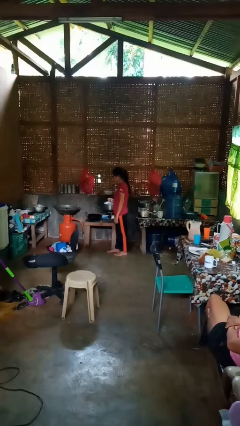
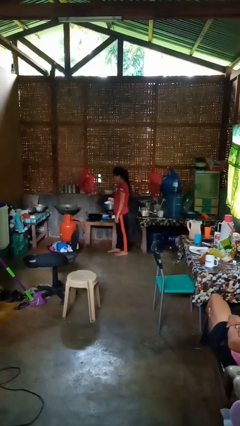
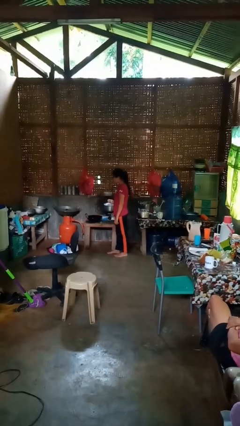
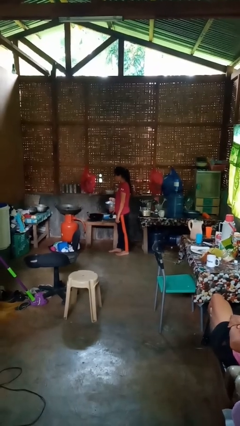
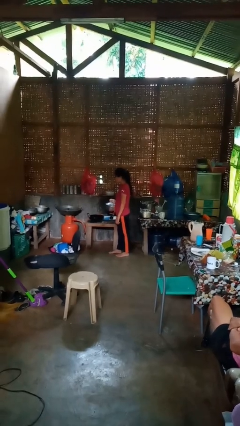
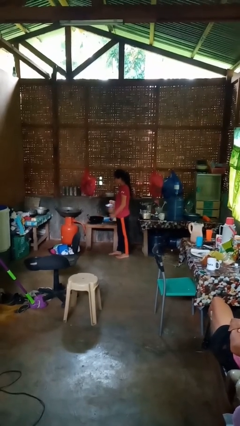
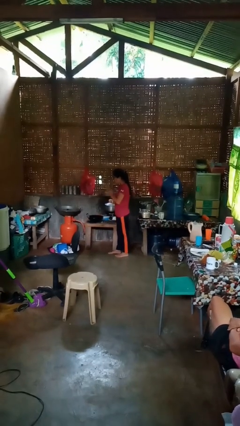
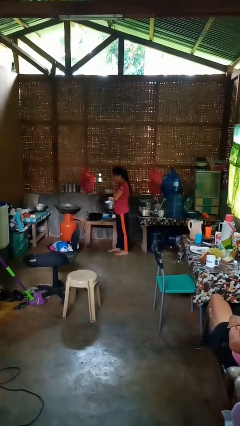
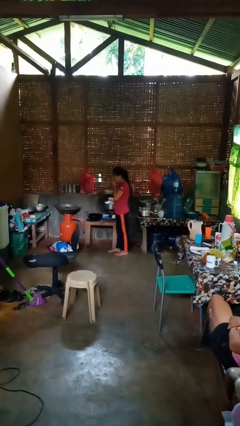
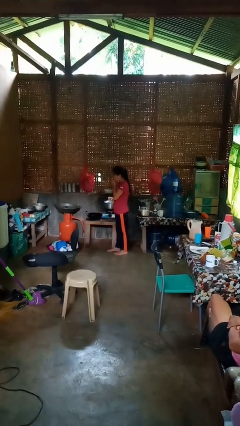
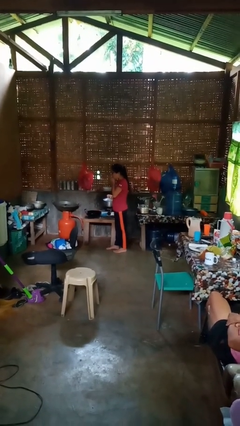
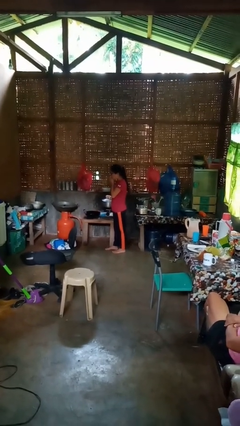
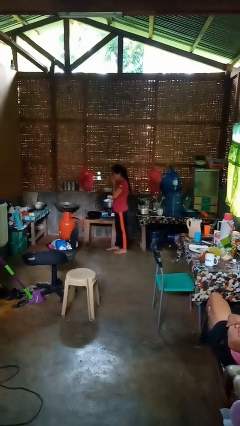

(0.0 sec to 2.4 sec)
person burns hand

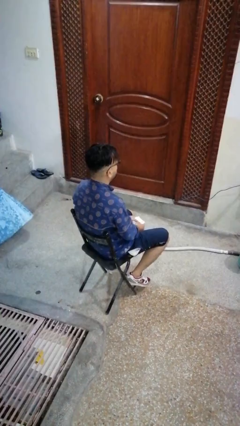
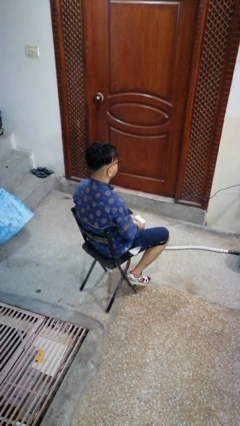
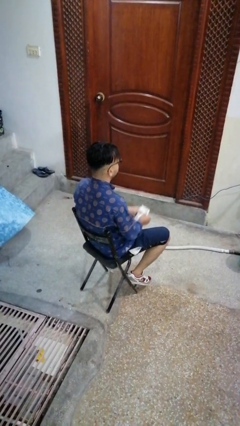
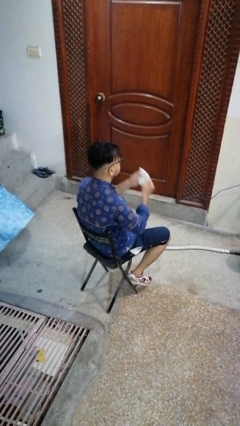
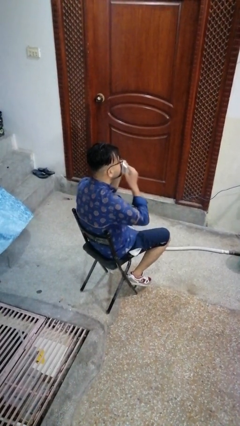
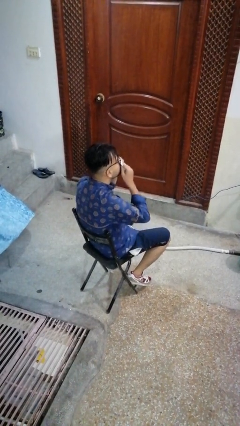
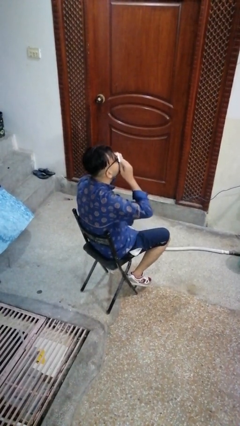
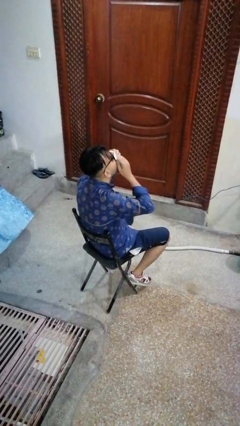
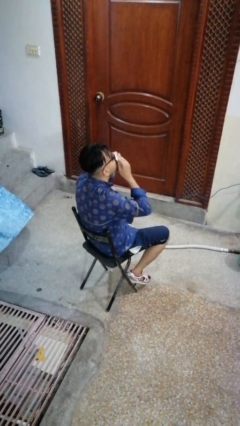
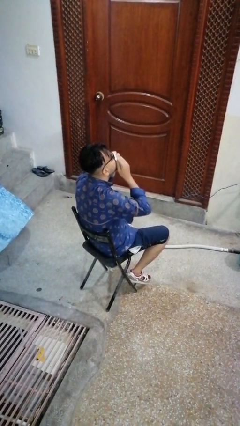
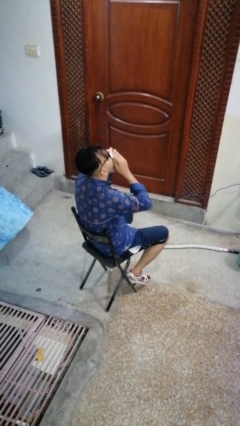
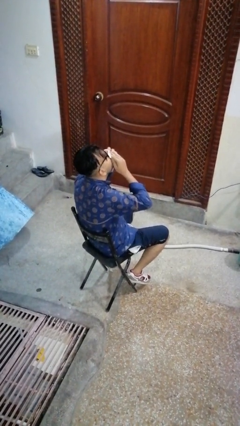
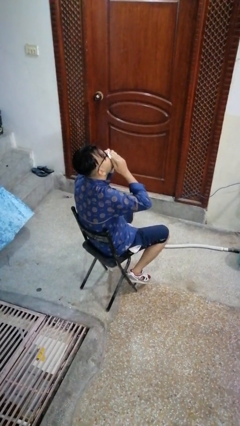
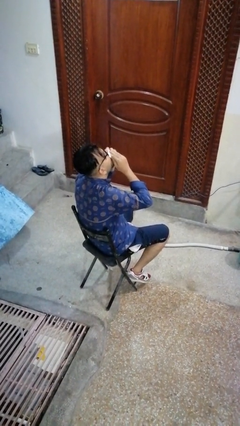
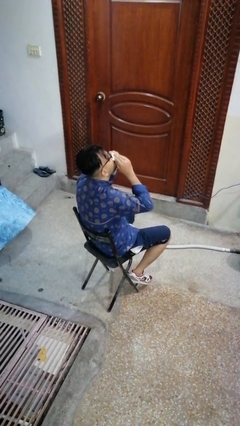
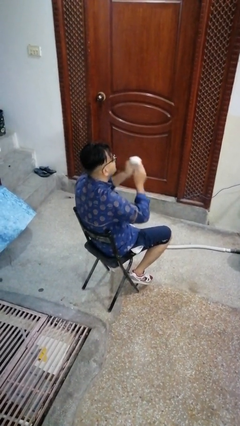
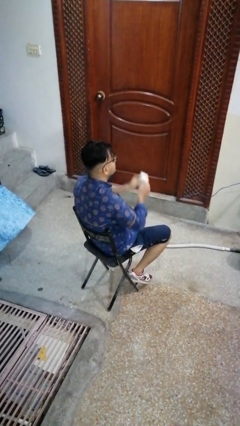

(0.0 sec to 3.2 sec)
person blows nose

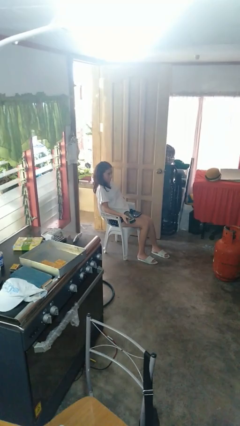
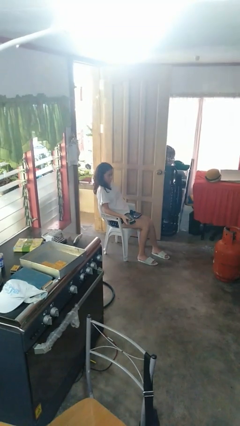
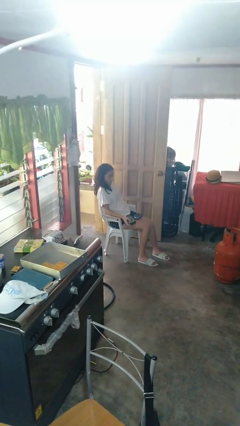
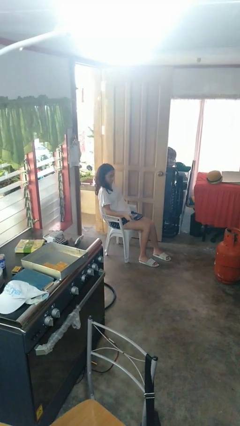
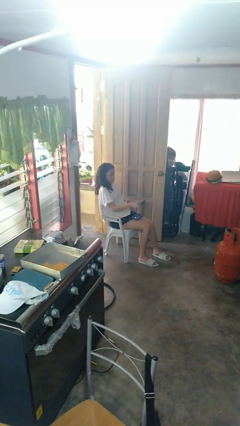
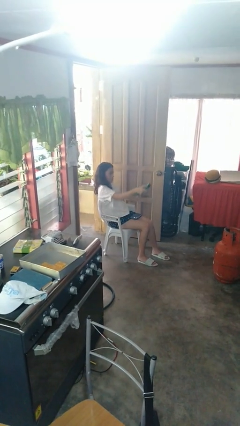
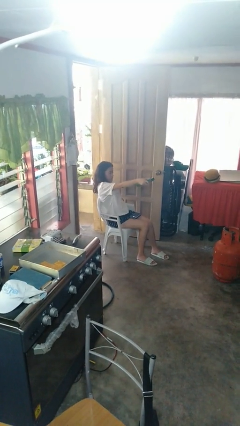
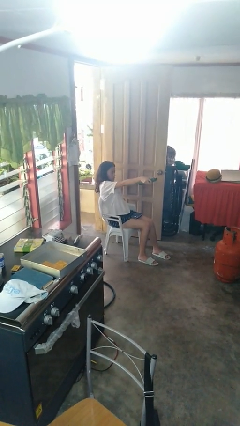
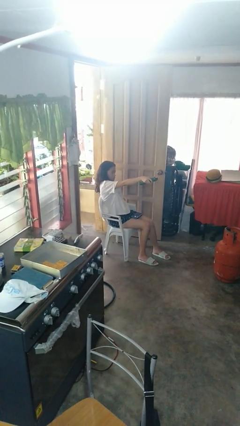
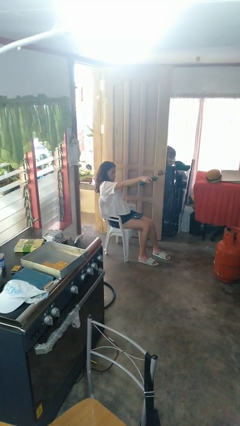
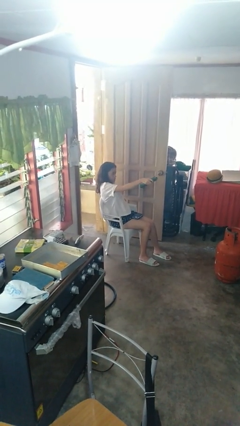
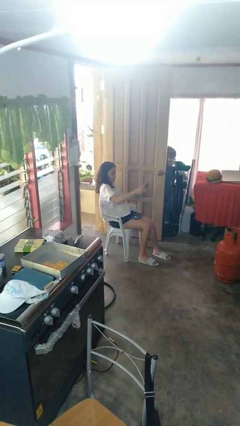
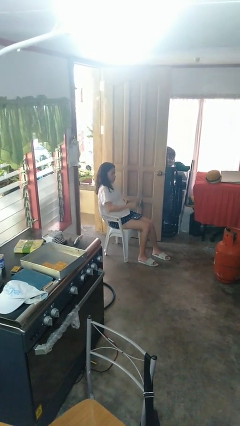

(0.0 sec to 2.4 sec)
person uses television remote

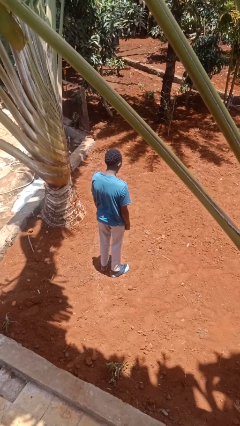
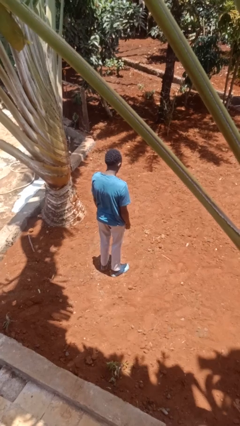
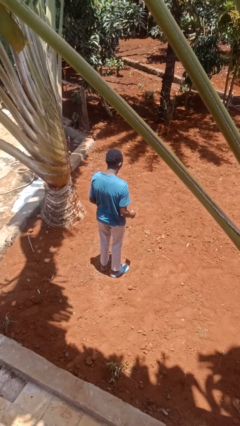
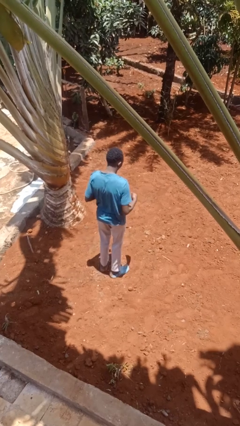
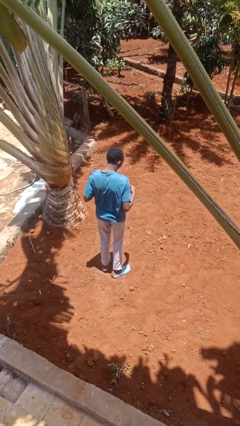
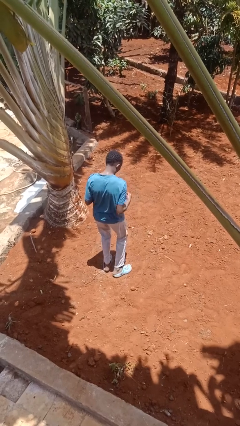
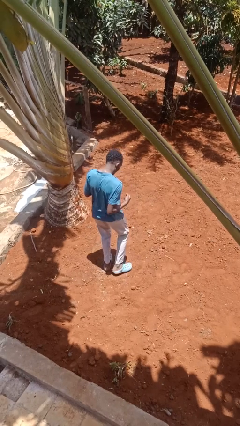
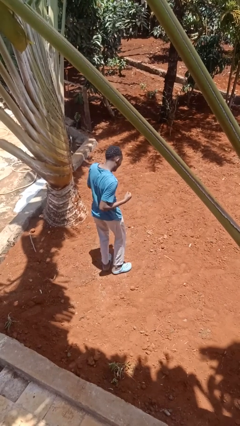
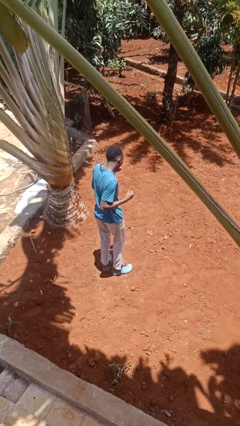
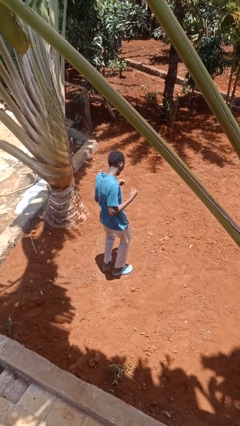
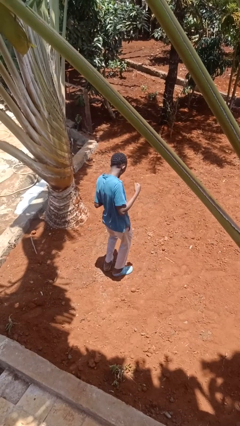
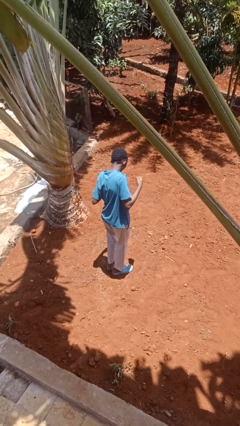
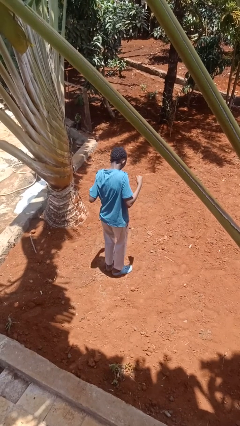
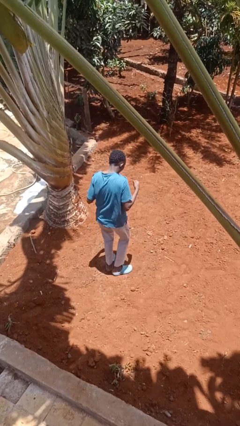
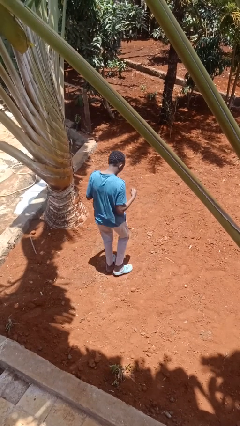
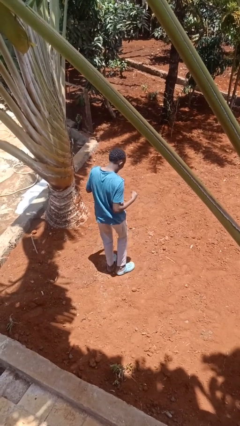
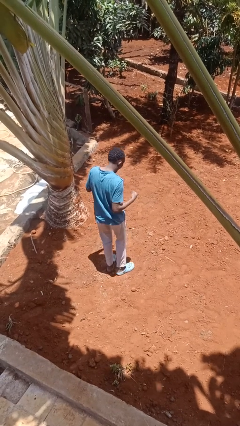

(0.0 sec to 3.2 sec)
person dances in place

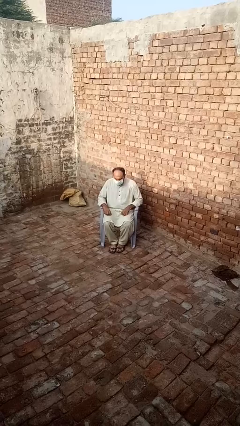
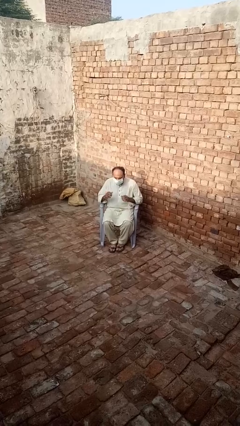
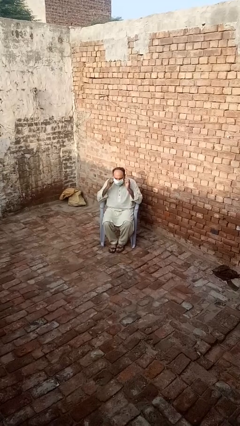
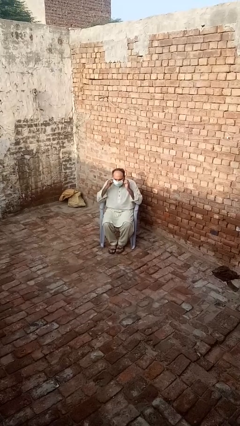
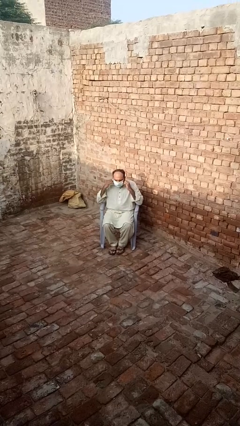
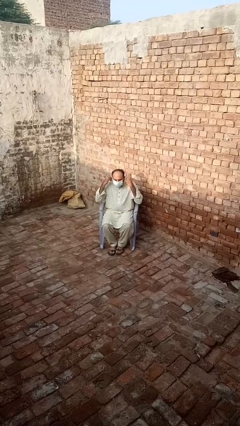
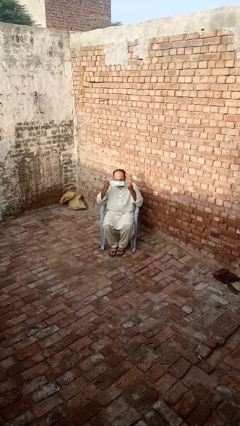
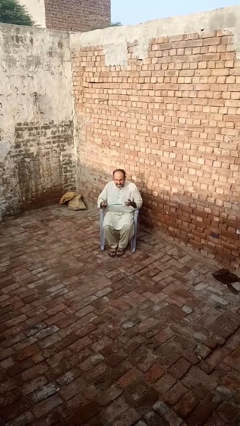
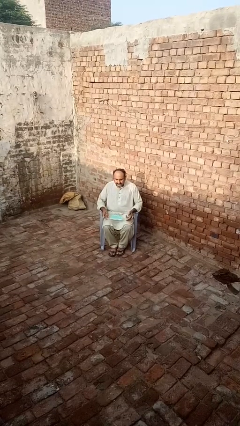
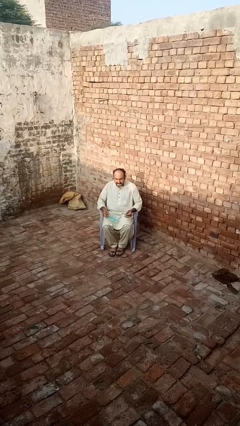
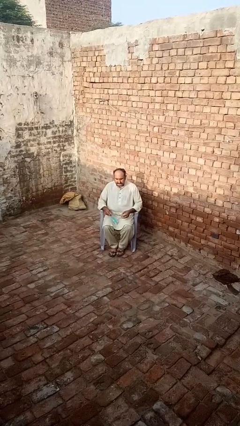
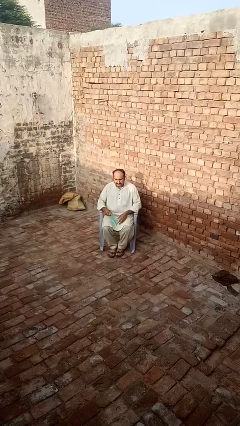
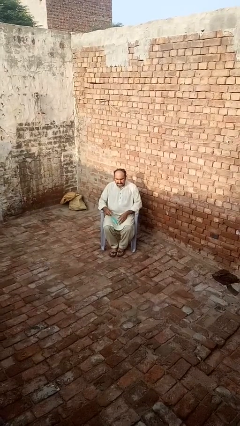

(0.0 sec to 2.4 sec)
person takes off facemask

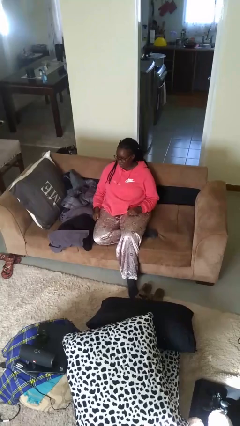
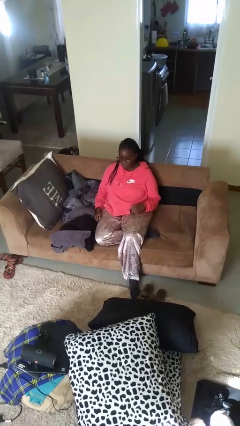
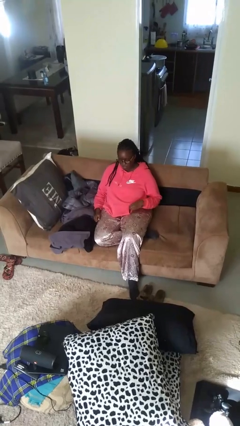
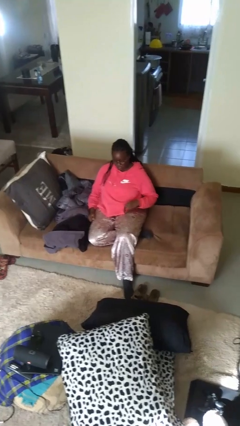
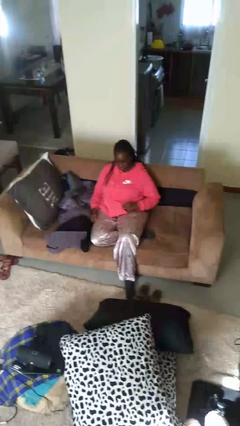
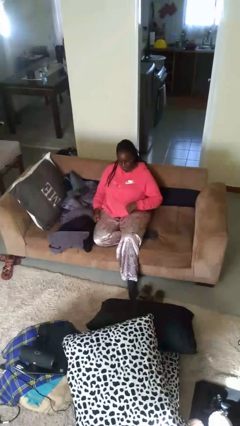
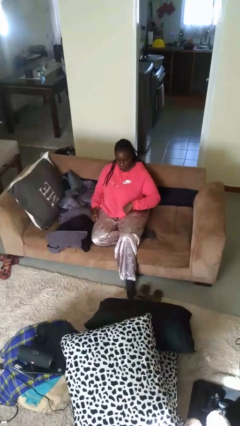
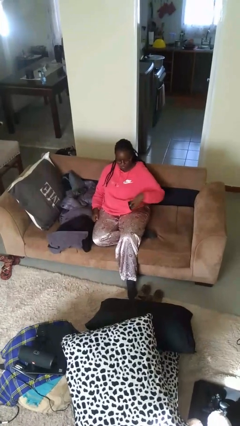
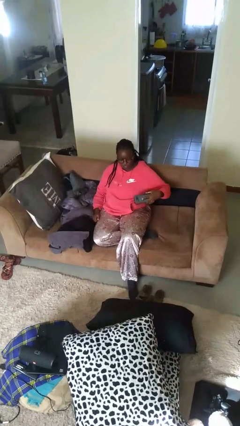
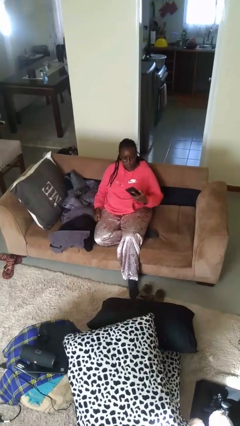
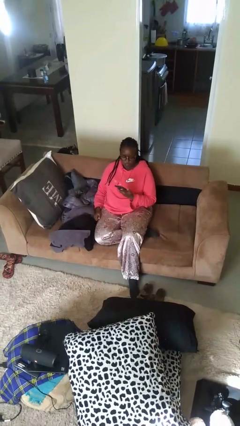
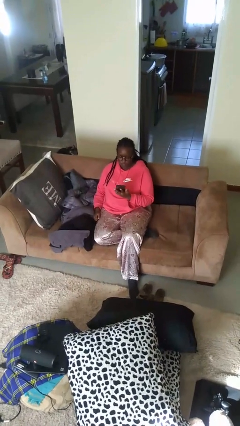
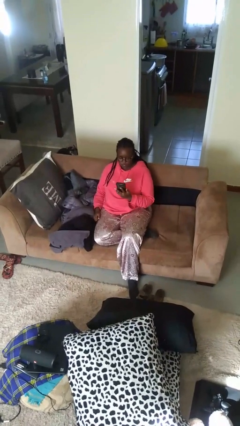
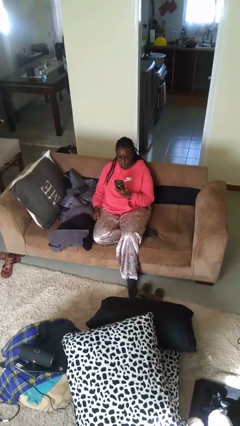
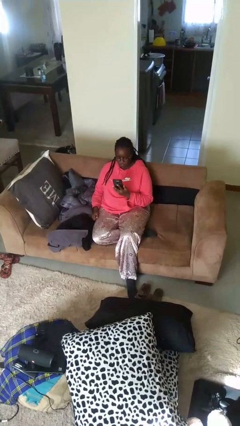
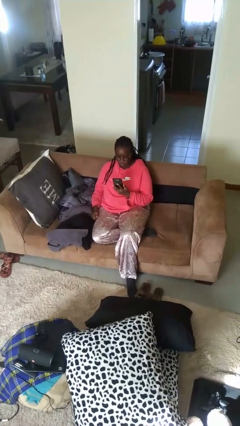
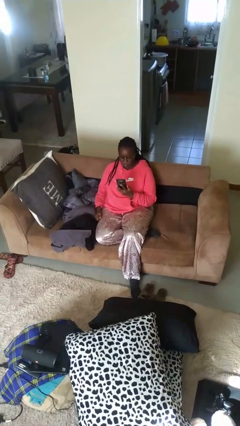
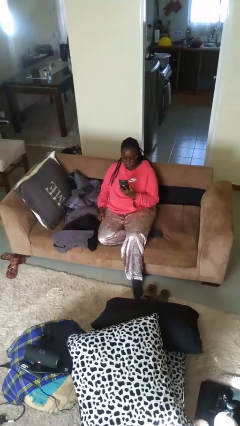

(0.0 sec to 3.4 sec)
person takes phone from pocket
